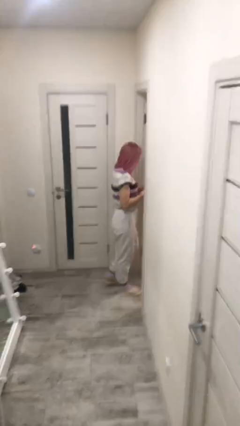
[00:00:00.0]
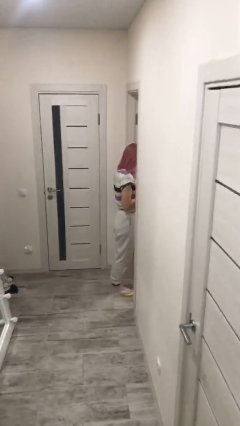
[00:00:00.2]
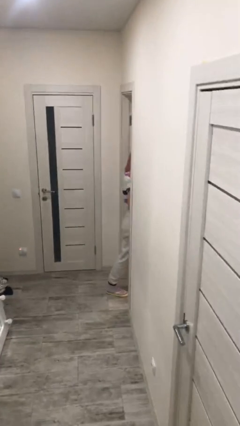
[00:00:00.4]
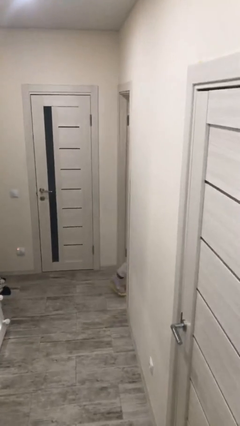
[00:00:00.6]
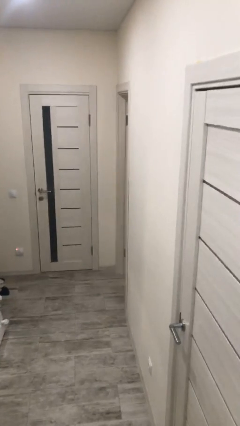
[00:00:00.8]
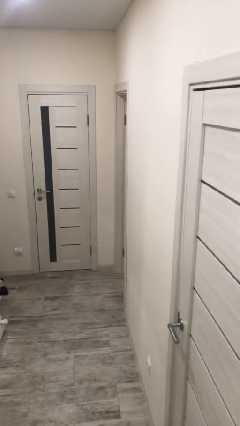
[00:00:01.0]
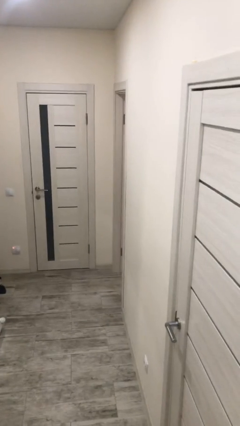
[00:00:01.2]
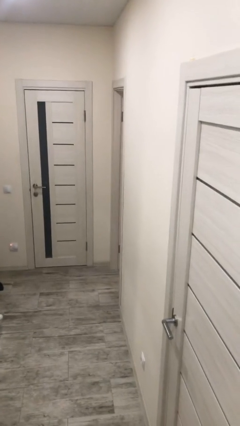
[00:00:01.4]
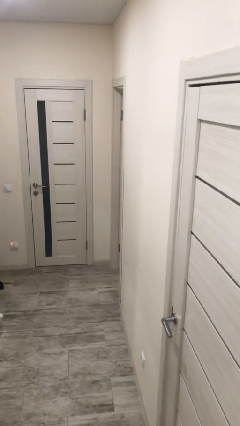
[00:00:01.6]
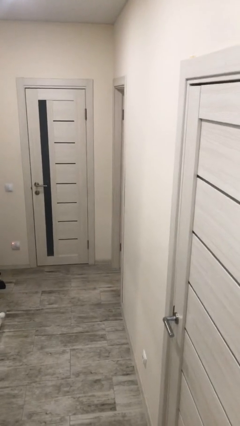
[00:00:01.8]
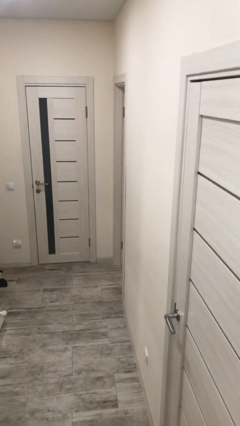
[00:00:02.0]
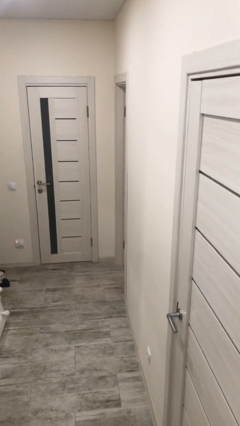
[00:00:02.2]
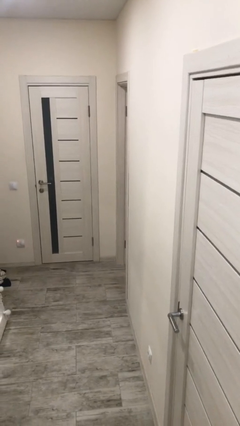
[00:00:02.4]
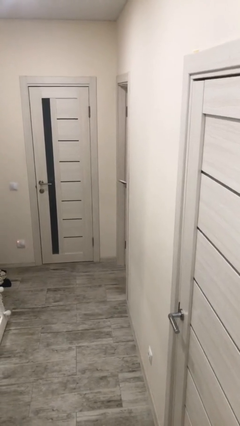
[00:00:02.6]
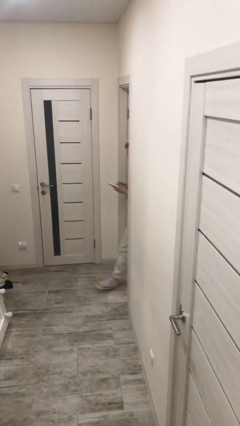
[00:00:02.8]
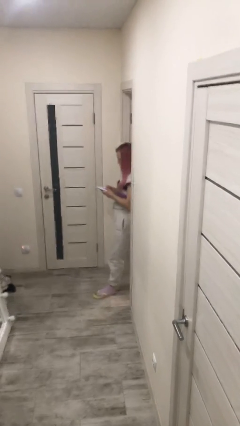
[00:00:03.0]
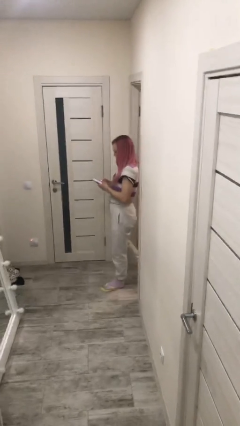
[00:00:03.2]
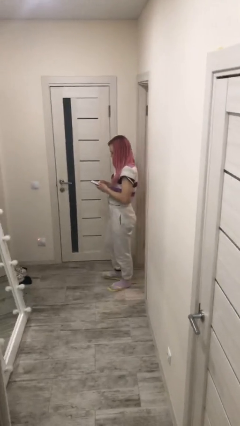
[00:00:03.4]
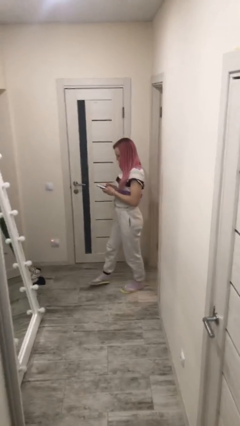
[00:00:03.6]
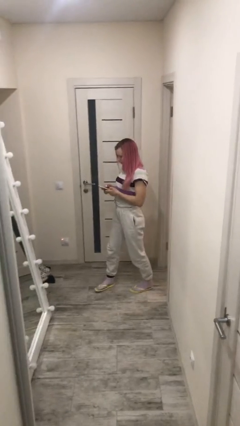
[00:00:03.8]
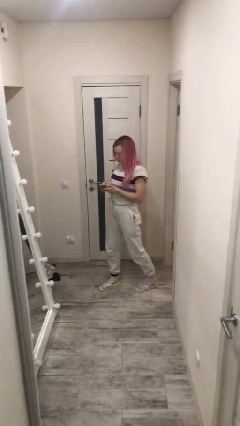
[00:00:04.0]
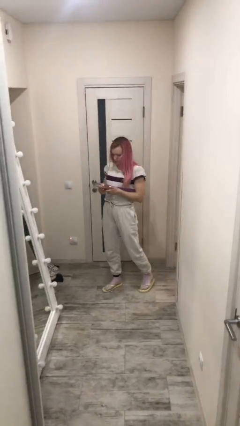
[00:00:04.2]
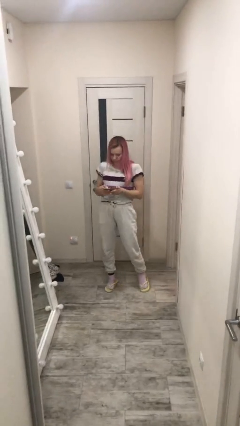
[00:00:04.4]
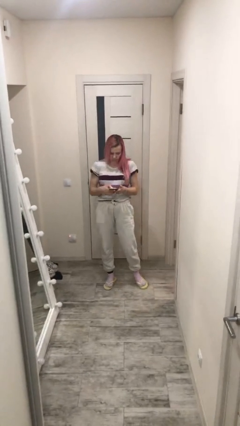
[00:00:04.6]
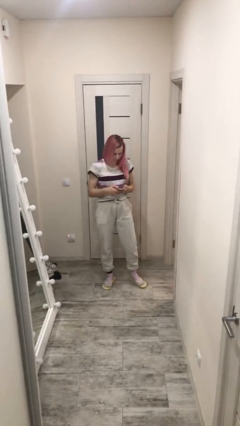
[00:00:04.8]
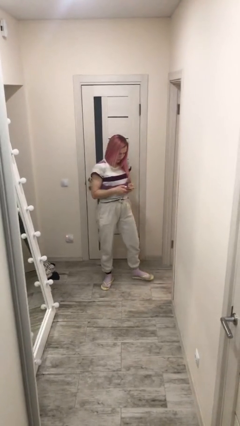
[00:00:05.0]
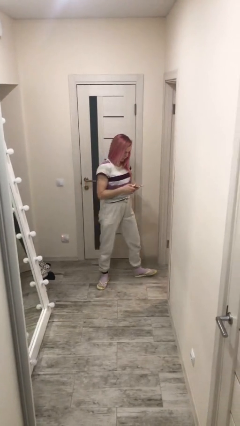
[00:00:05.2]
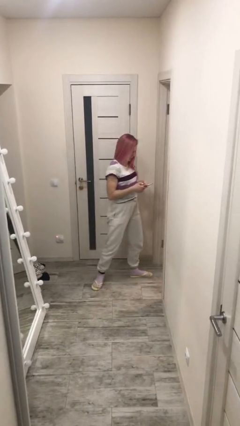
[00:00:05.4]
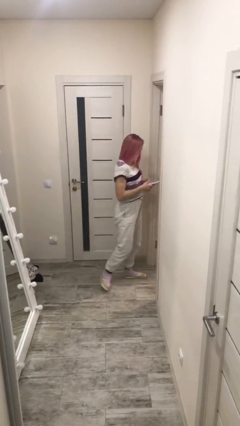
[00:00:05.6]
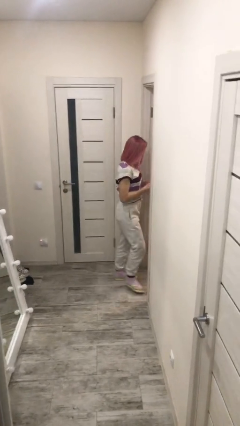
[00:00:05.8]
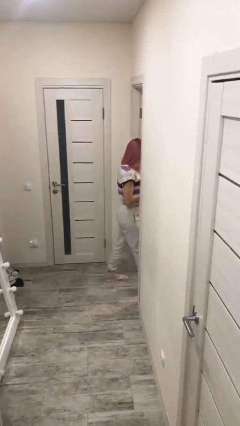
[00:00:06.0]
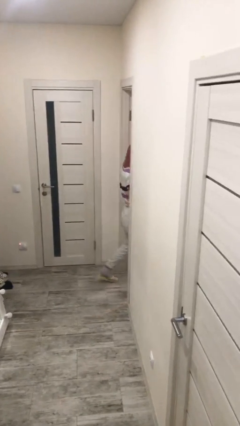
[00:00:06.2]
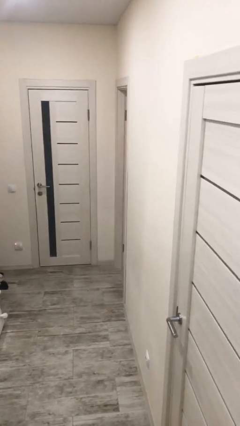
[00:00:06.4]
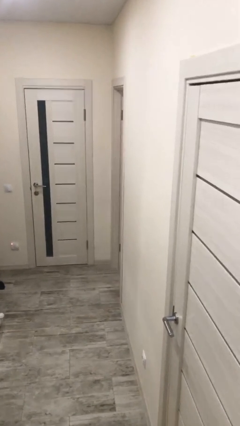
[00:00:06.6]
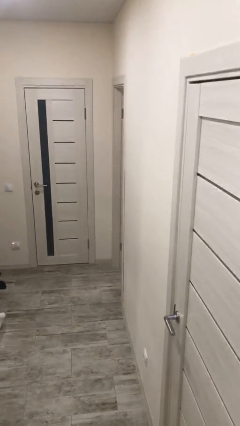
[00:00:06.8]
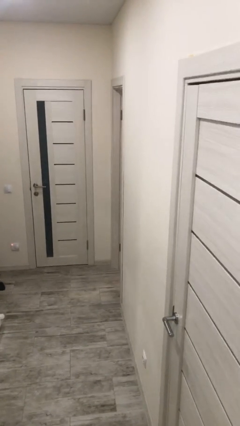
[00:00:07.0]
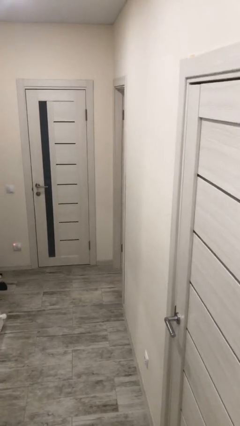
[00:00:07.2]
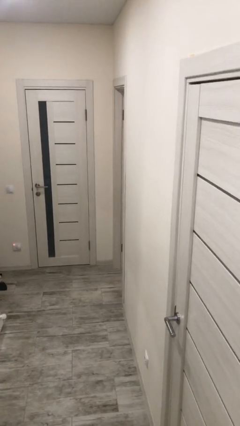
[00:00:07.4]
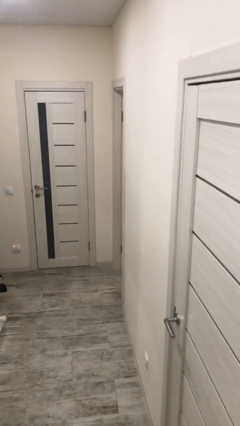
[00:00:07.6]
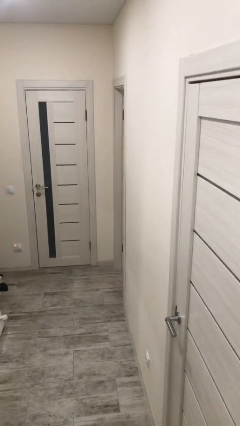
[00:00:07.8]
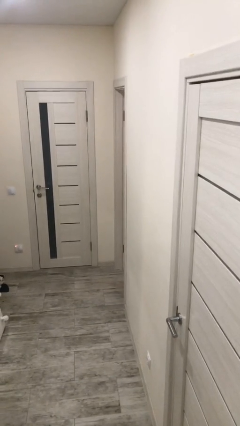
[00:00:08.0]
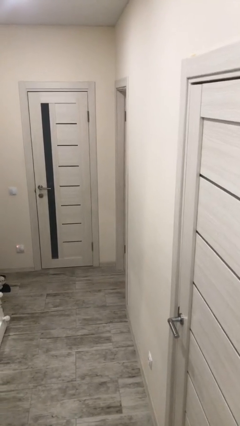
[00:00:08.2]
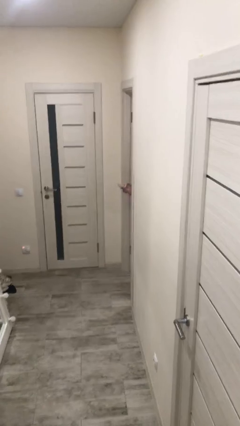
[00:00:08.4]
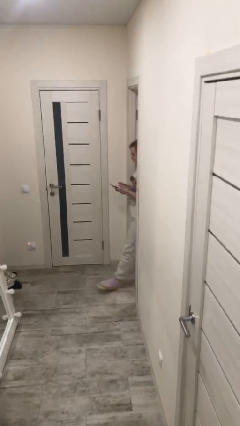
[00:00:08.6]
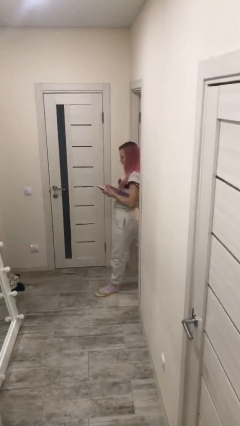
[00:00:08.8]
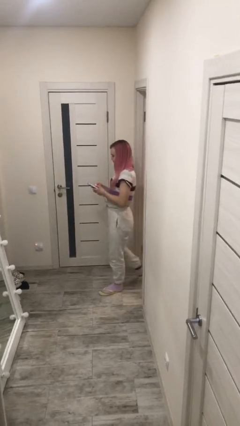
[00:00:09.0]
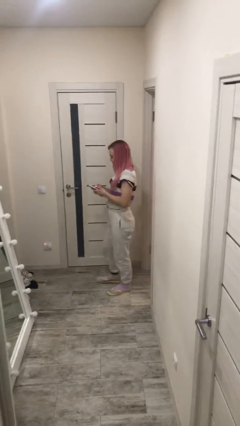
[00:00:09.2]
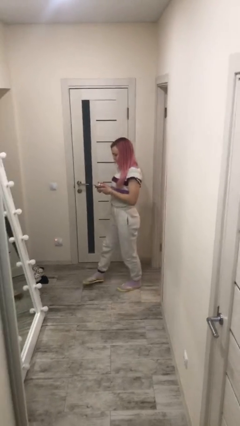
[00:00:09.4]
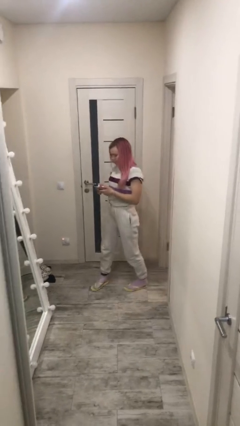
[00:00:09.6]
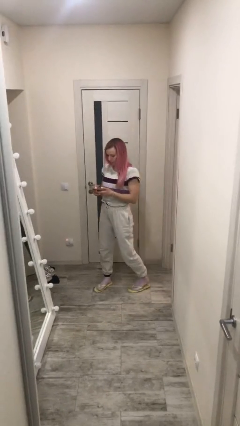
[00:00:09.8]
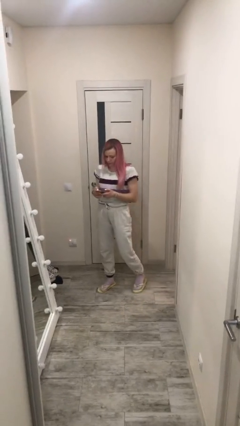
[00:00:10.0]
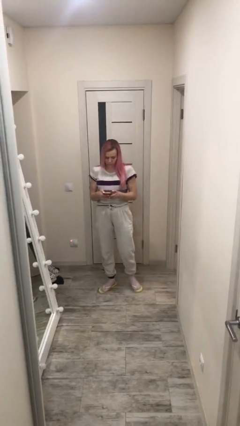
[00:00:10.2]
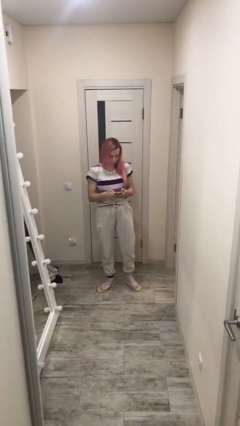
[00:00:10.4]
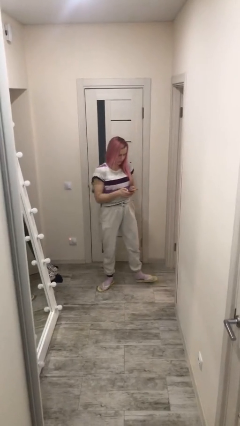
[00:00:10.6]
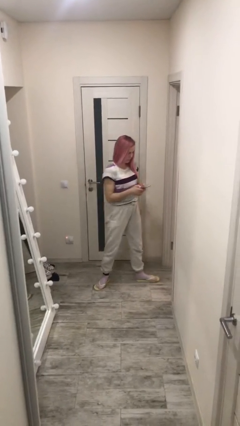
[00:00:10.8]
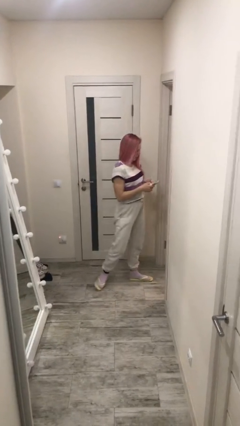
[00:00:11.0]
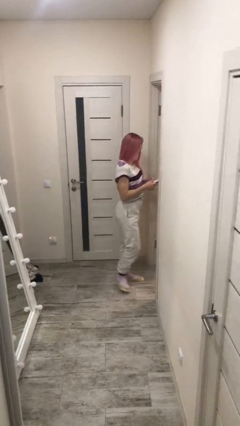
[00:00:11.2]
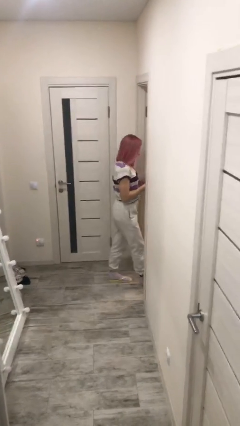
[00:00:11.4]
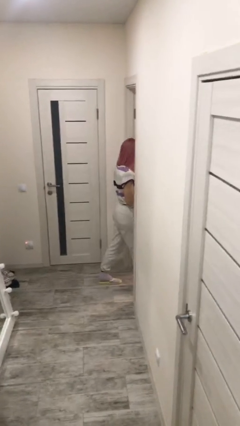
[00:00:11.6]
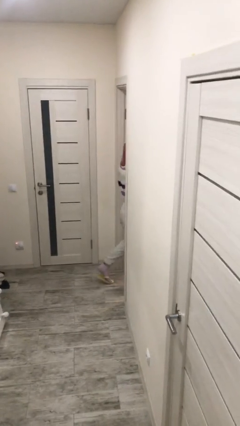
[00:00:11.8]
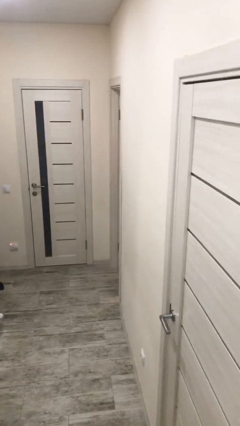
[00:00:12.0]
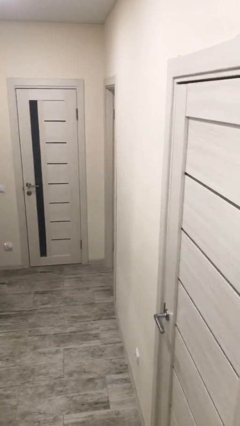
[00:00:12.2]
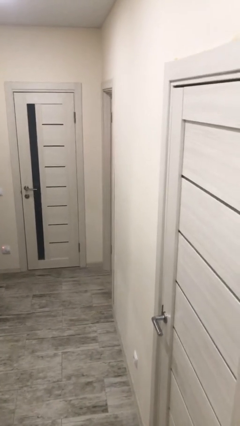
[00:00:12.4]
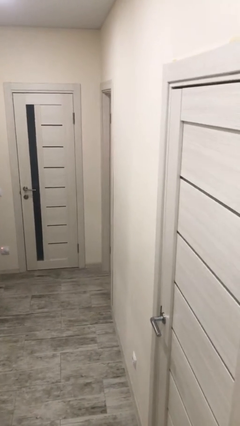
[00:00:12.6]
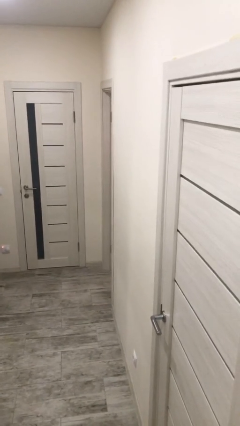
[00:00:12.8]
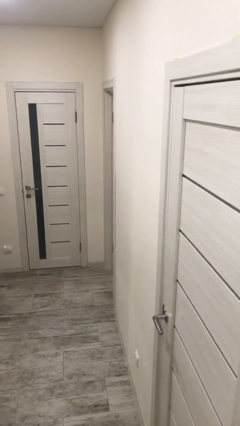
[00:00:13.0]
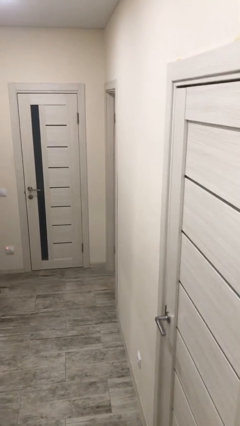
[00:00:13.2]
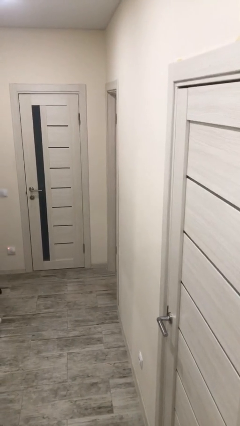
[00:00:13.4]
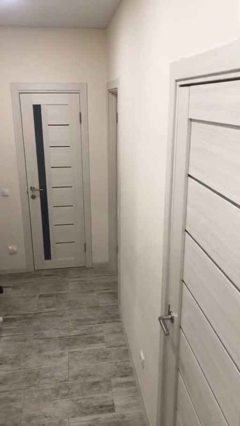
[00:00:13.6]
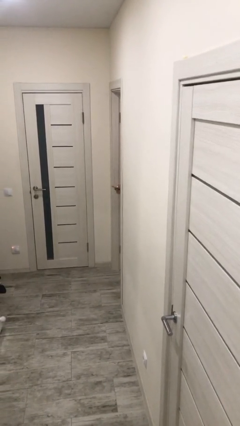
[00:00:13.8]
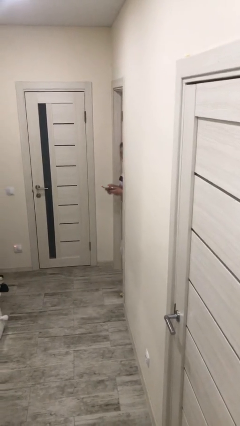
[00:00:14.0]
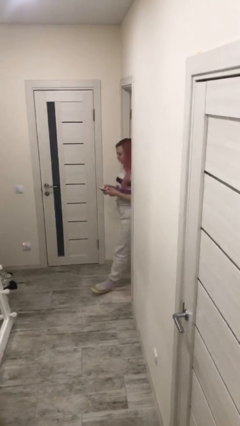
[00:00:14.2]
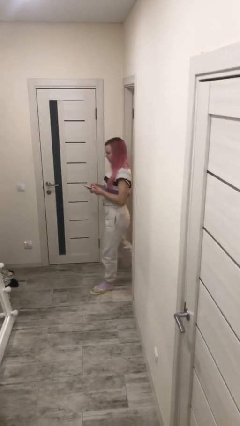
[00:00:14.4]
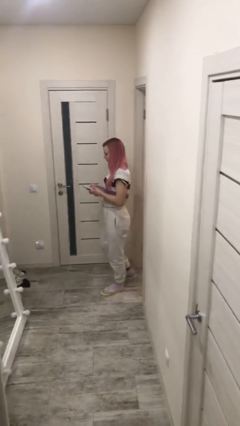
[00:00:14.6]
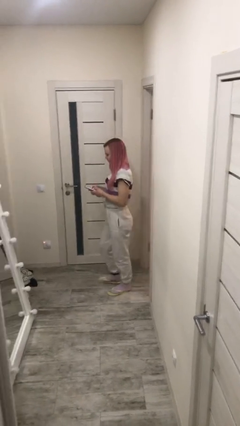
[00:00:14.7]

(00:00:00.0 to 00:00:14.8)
person texts on phone

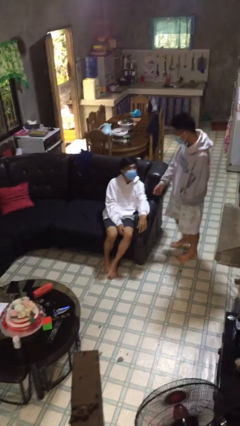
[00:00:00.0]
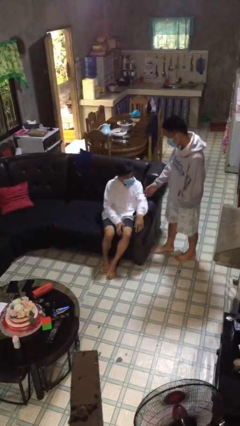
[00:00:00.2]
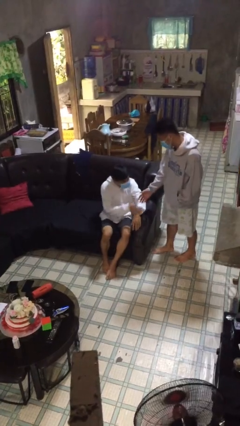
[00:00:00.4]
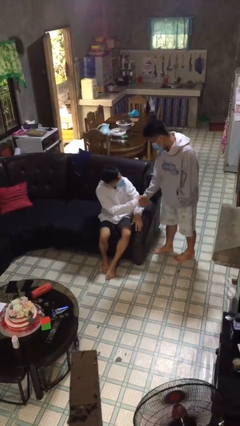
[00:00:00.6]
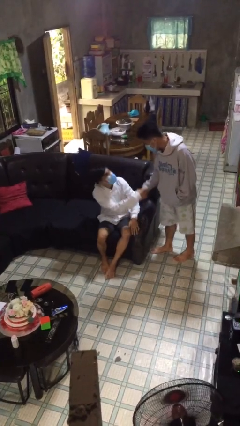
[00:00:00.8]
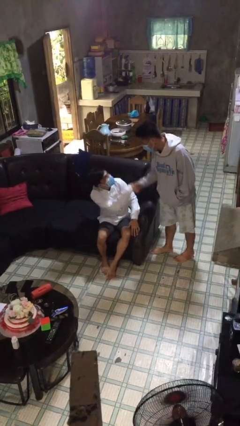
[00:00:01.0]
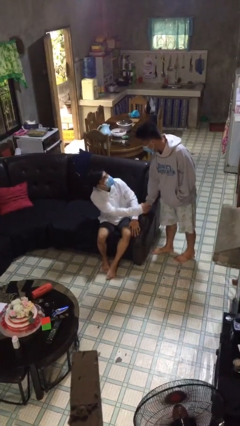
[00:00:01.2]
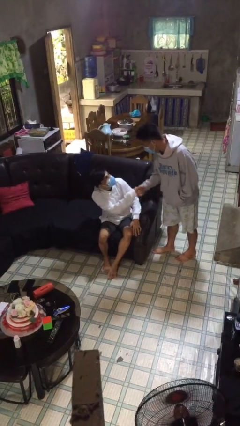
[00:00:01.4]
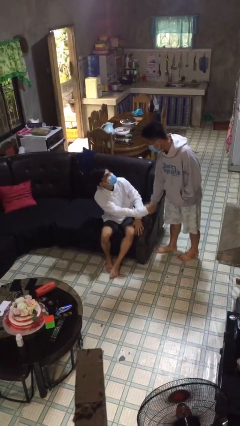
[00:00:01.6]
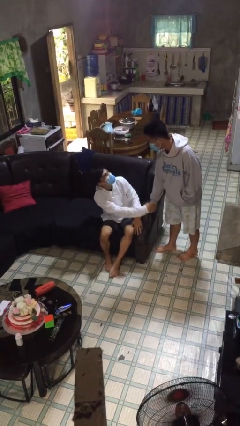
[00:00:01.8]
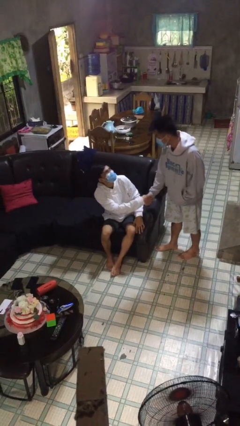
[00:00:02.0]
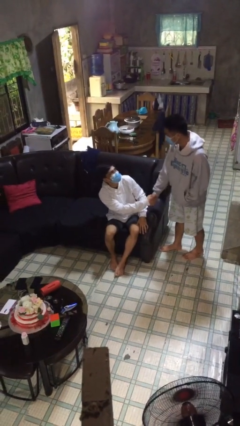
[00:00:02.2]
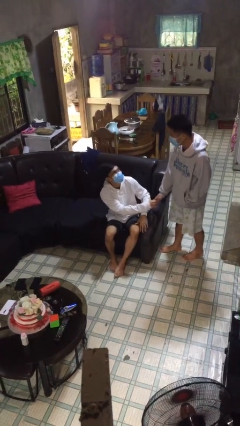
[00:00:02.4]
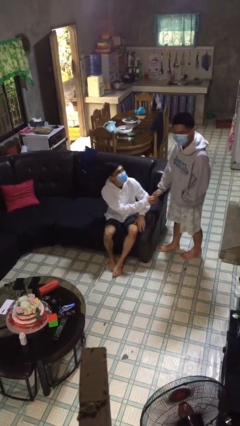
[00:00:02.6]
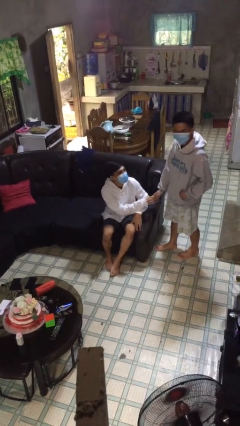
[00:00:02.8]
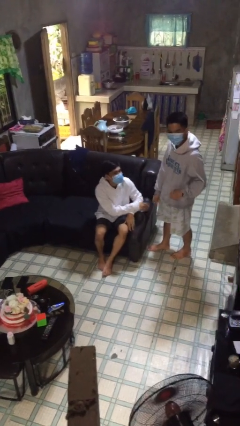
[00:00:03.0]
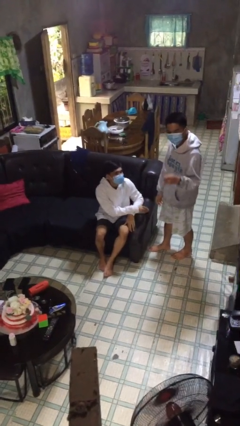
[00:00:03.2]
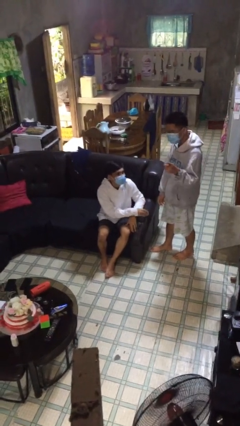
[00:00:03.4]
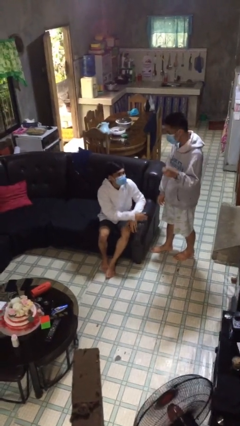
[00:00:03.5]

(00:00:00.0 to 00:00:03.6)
person shakes hand
